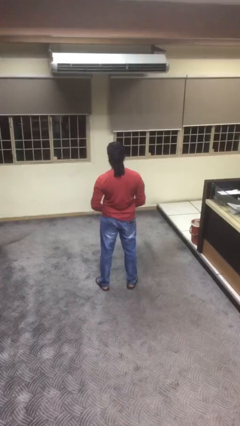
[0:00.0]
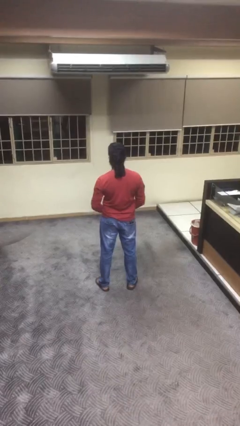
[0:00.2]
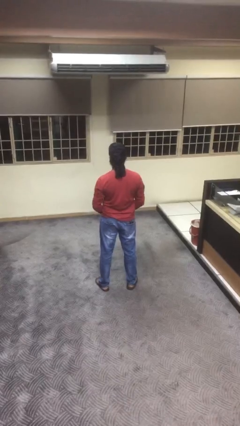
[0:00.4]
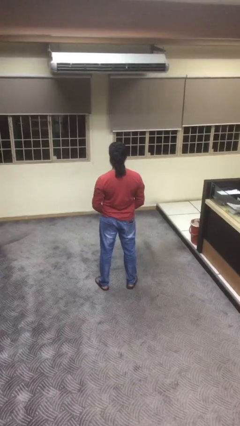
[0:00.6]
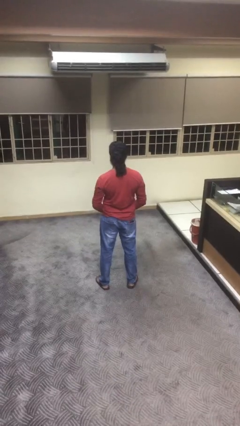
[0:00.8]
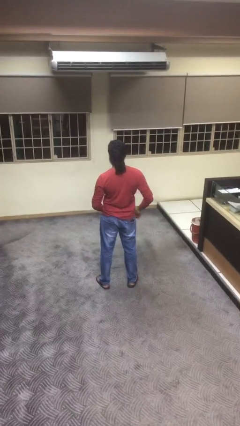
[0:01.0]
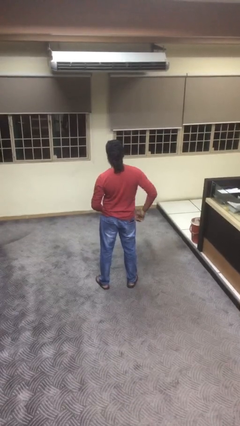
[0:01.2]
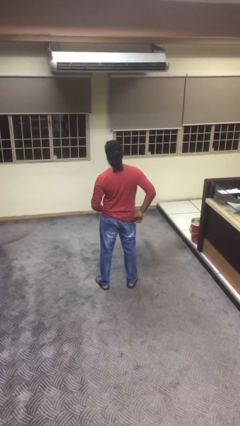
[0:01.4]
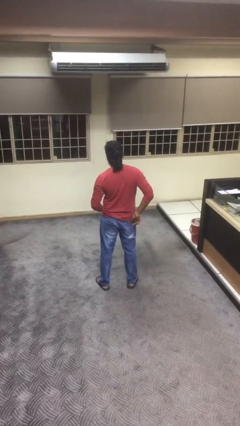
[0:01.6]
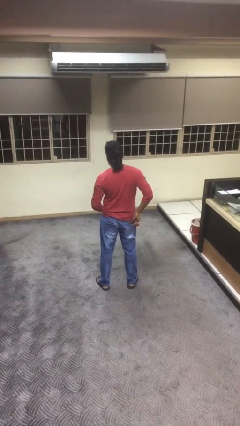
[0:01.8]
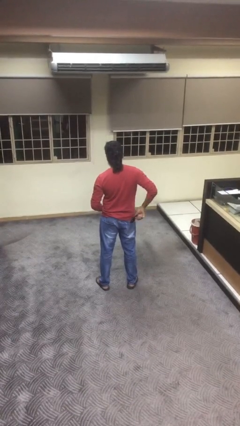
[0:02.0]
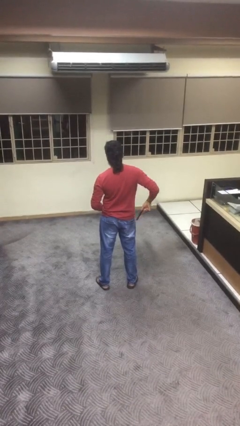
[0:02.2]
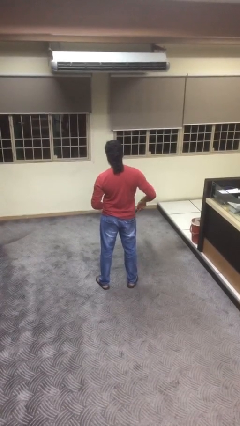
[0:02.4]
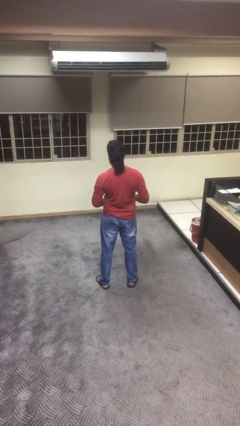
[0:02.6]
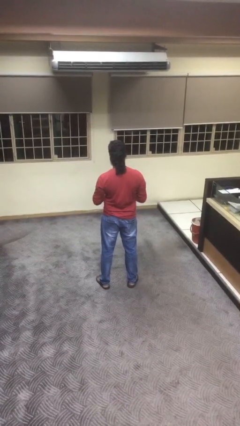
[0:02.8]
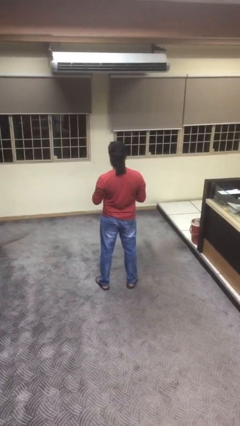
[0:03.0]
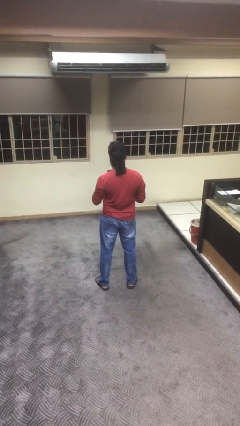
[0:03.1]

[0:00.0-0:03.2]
person takes phone from pocket

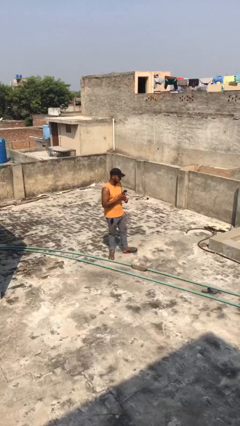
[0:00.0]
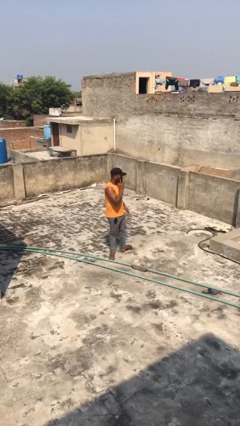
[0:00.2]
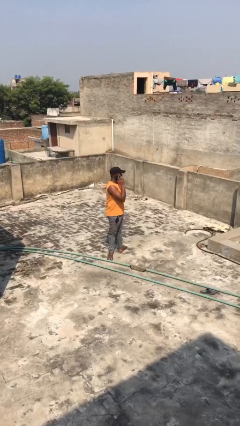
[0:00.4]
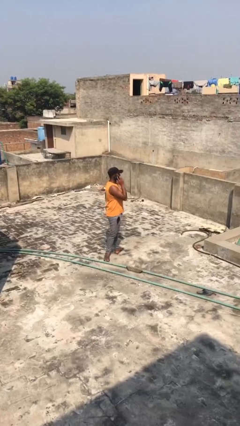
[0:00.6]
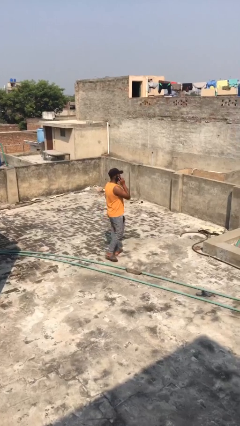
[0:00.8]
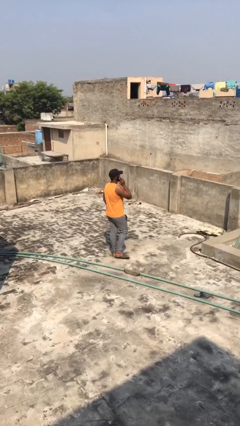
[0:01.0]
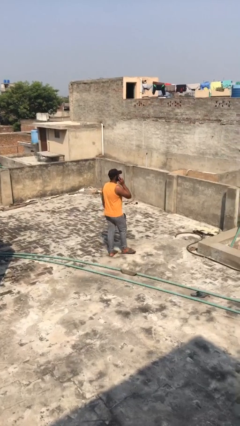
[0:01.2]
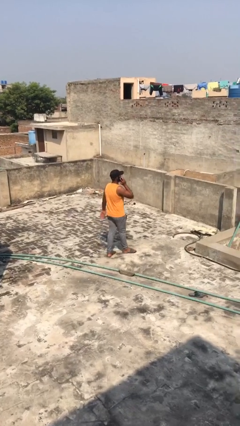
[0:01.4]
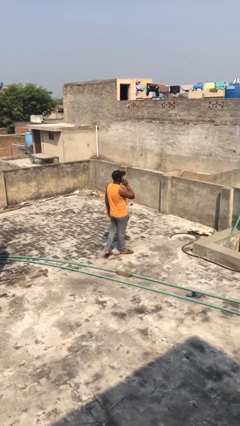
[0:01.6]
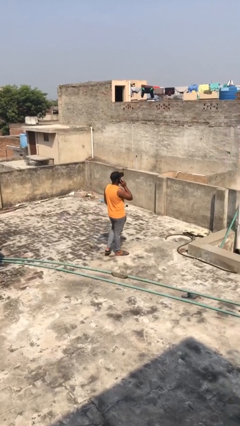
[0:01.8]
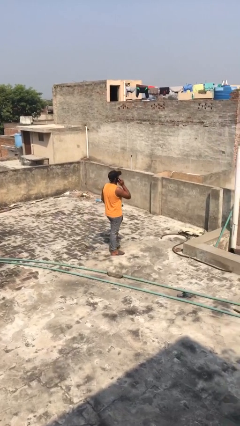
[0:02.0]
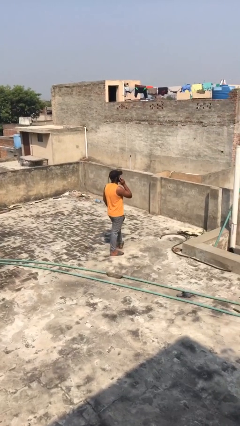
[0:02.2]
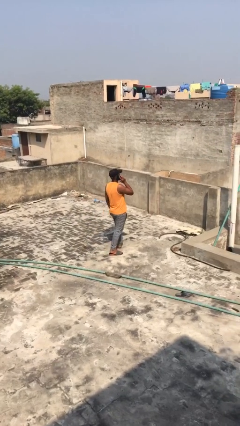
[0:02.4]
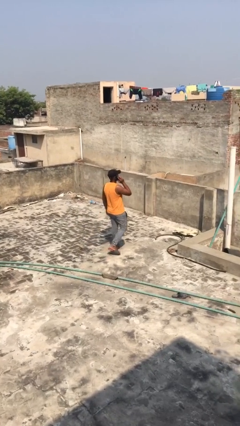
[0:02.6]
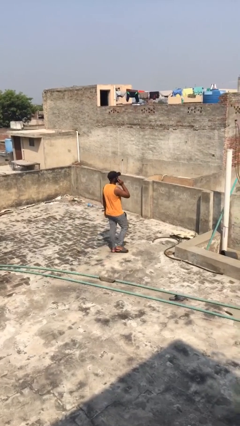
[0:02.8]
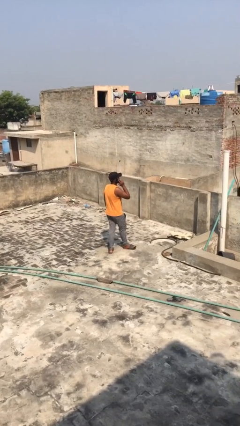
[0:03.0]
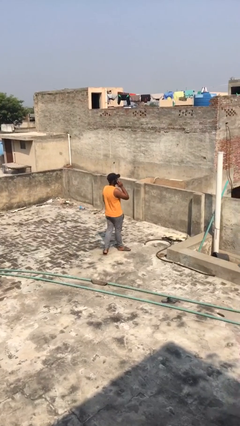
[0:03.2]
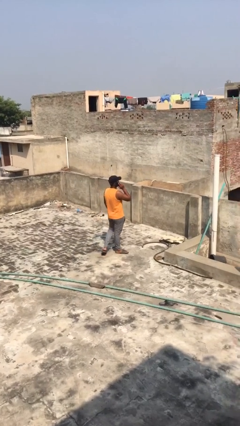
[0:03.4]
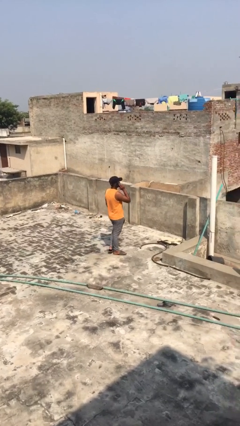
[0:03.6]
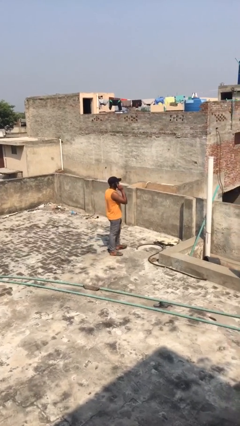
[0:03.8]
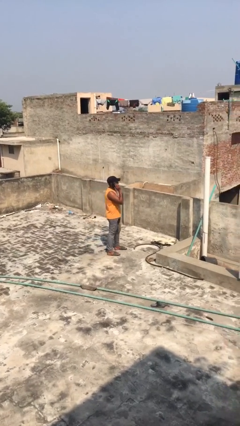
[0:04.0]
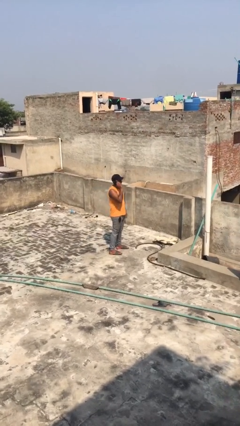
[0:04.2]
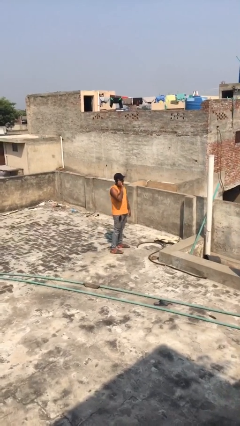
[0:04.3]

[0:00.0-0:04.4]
person talks on phone

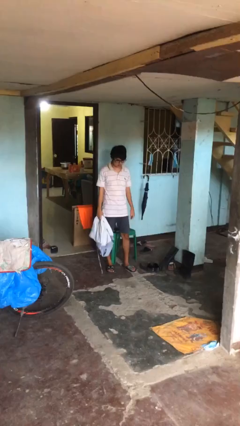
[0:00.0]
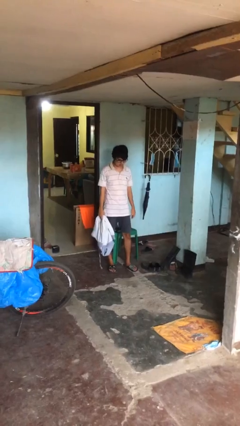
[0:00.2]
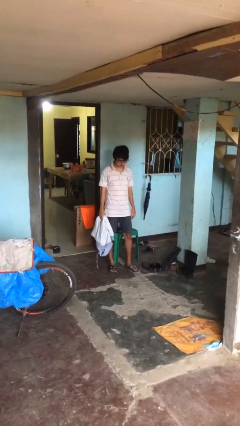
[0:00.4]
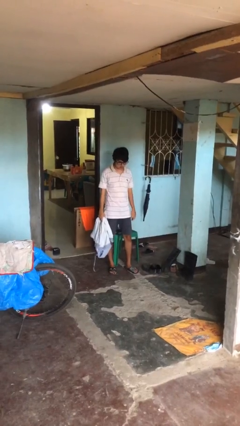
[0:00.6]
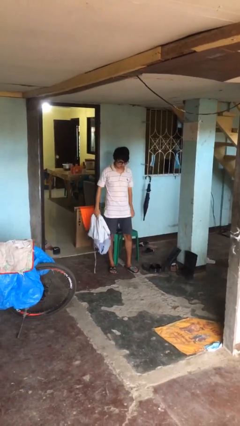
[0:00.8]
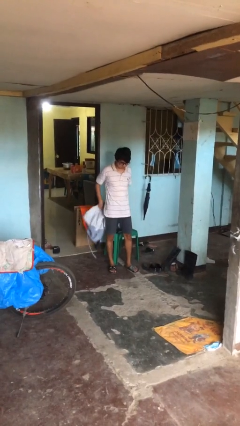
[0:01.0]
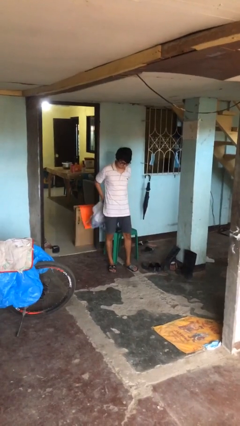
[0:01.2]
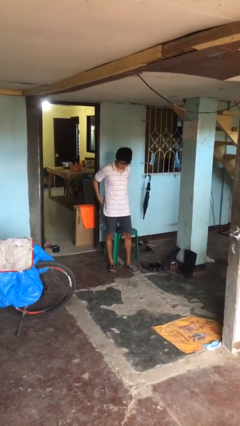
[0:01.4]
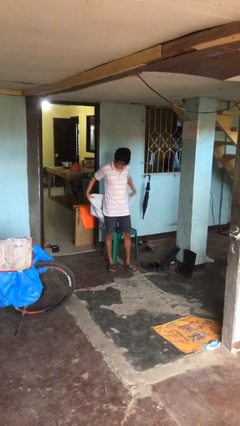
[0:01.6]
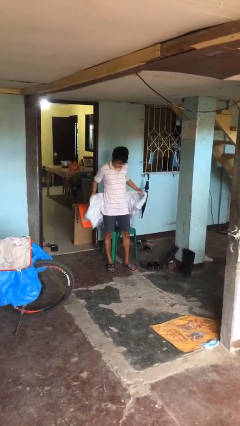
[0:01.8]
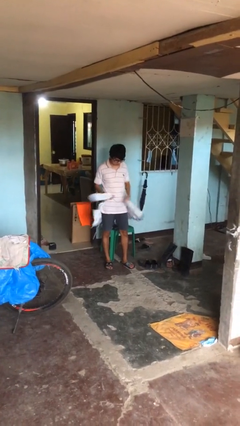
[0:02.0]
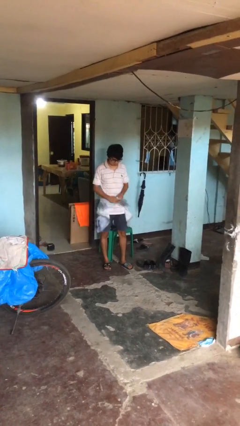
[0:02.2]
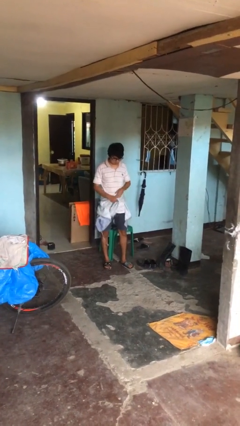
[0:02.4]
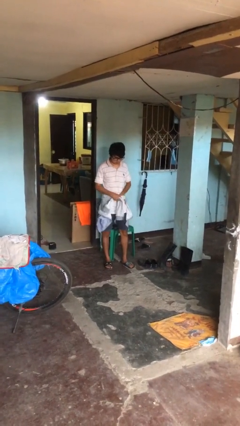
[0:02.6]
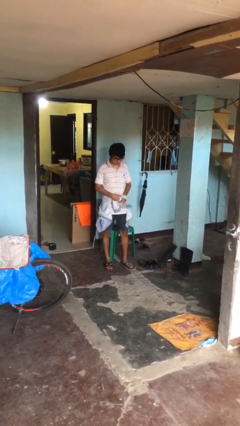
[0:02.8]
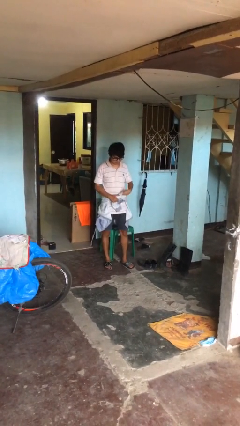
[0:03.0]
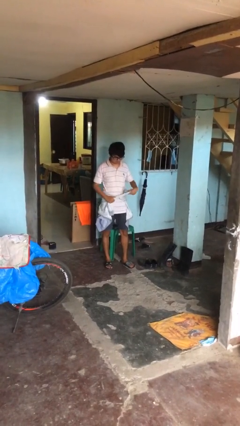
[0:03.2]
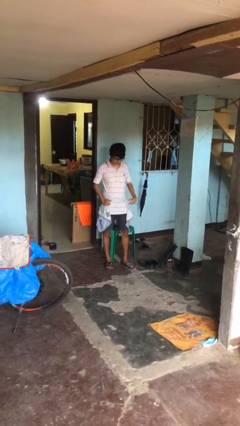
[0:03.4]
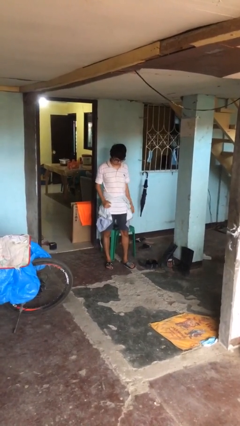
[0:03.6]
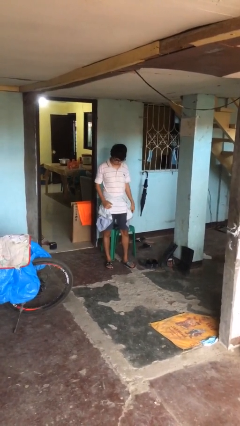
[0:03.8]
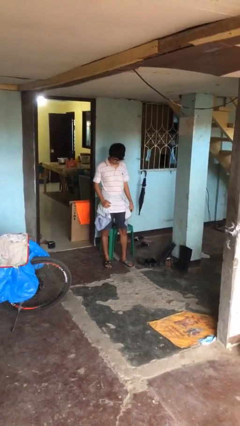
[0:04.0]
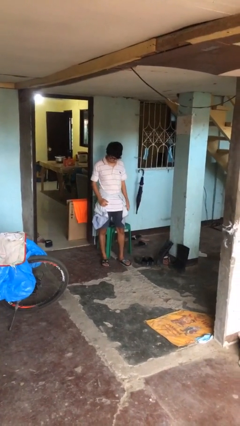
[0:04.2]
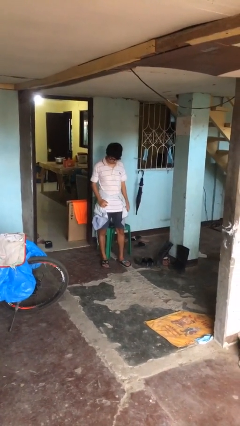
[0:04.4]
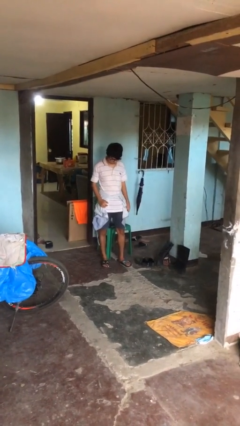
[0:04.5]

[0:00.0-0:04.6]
person ties jacket around waist

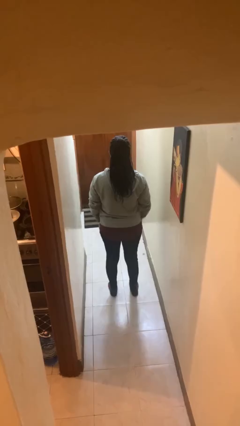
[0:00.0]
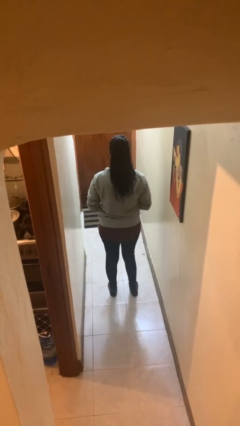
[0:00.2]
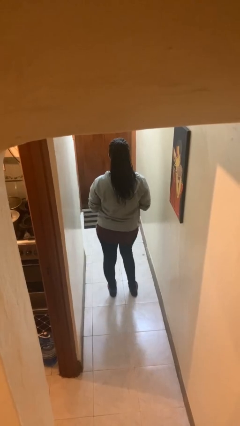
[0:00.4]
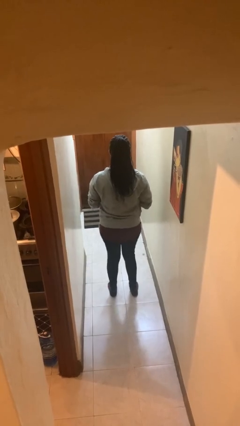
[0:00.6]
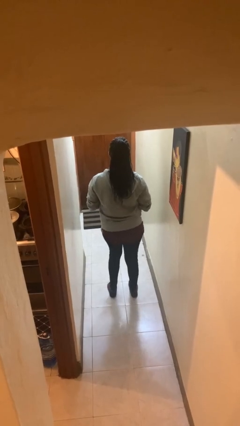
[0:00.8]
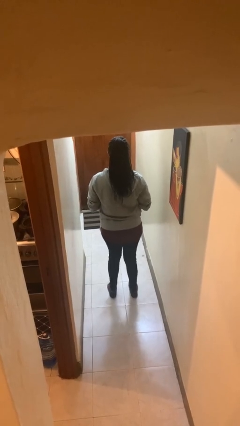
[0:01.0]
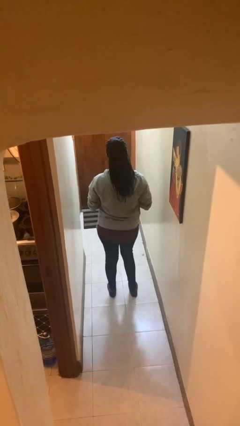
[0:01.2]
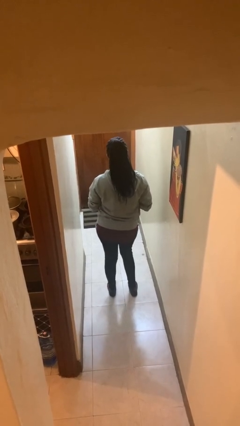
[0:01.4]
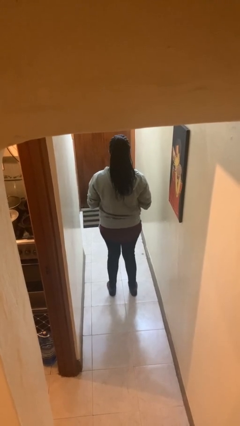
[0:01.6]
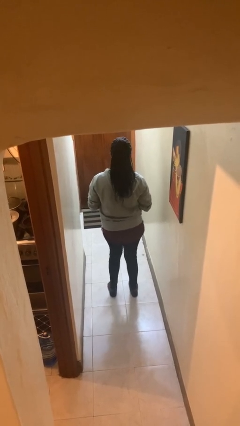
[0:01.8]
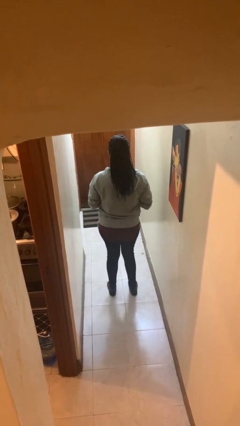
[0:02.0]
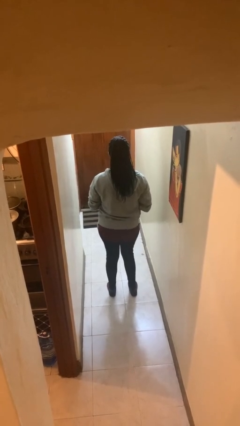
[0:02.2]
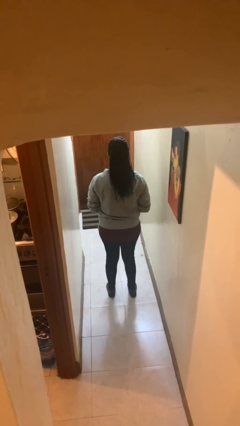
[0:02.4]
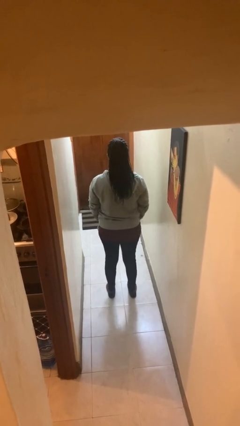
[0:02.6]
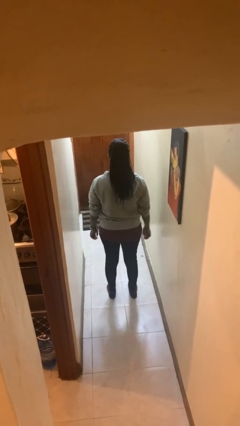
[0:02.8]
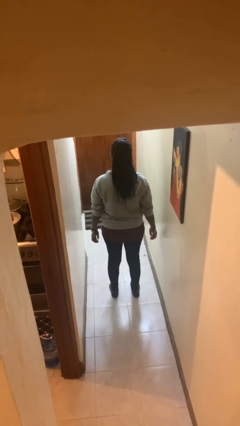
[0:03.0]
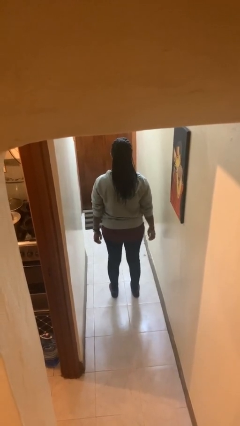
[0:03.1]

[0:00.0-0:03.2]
person wiggles hips

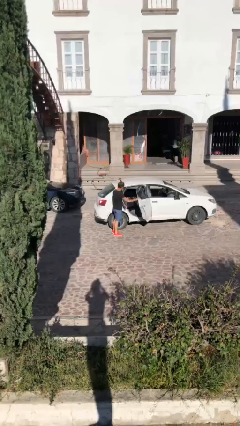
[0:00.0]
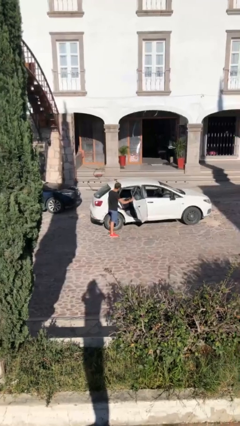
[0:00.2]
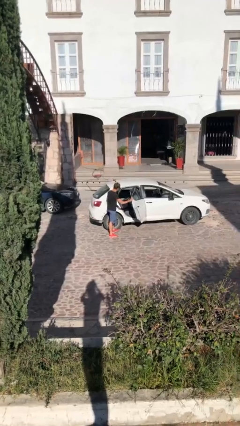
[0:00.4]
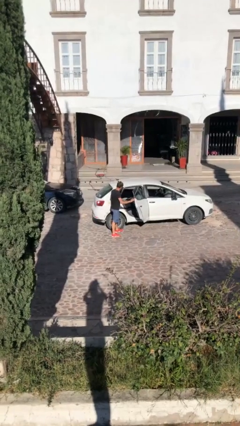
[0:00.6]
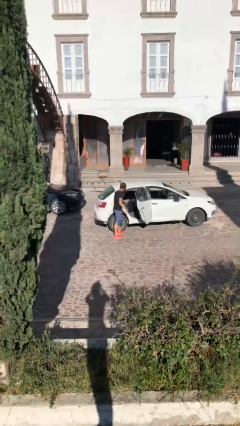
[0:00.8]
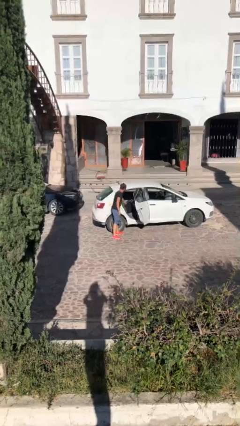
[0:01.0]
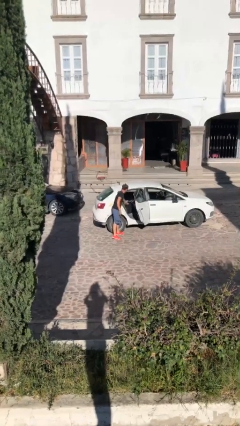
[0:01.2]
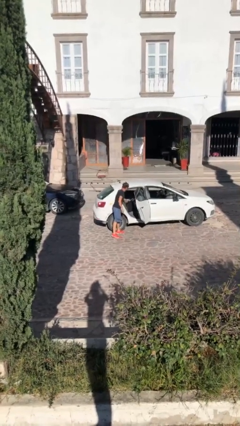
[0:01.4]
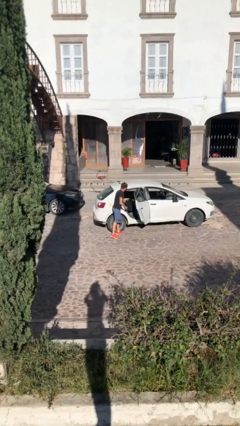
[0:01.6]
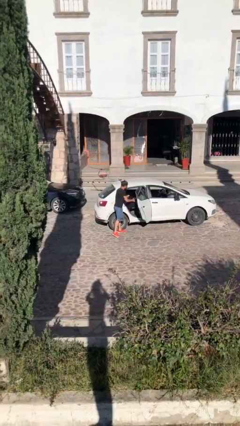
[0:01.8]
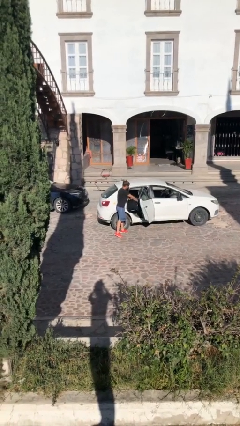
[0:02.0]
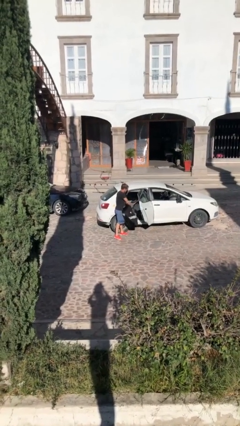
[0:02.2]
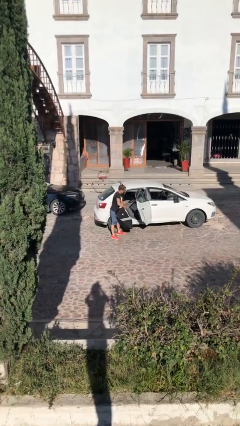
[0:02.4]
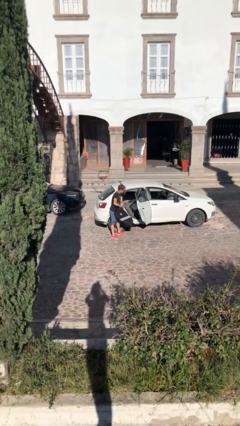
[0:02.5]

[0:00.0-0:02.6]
person unloads car
